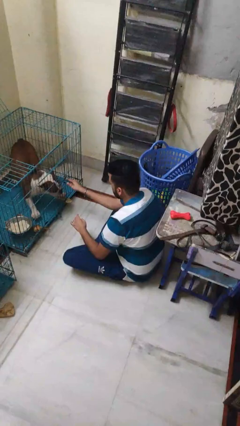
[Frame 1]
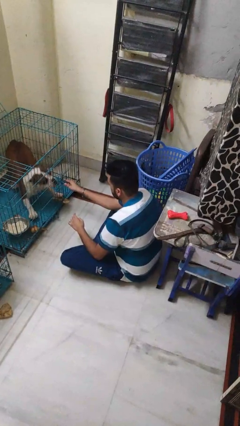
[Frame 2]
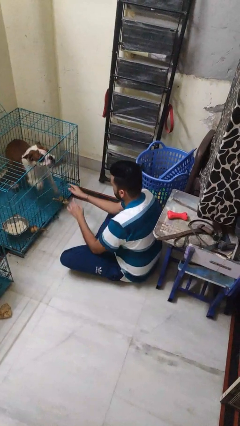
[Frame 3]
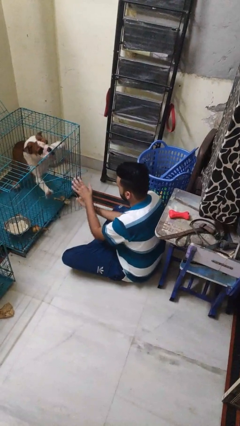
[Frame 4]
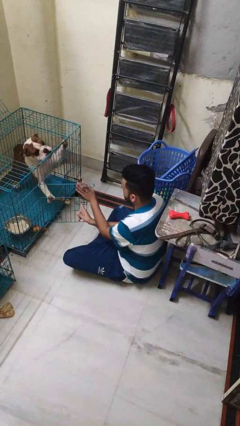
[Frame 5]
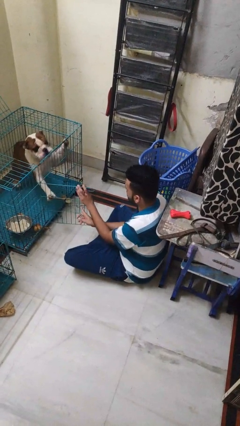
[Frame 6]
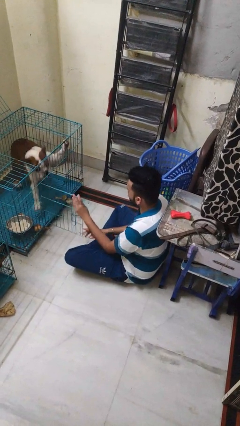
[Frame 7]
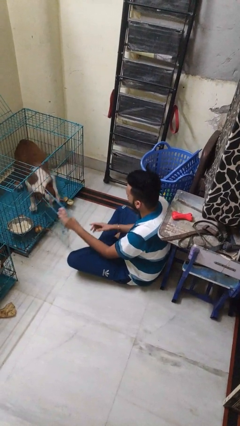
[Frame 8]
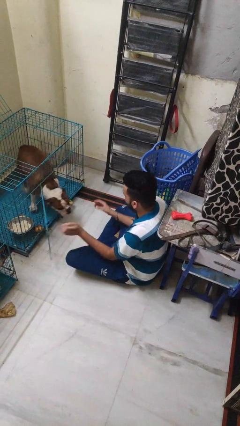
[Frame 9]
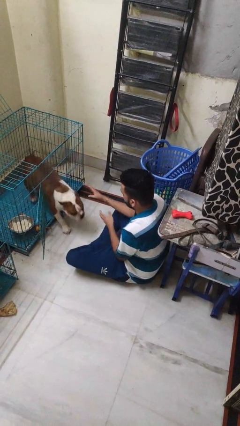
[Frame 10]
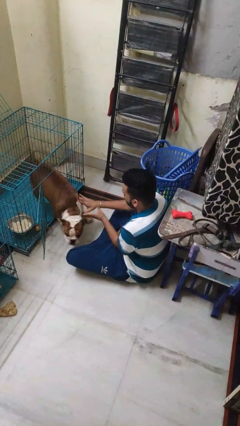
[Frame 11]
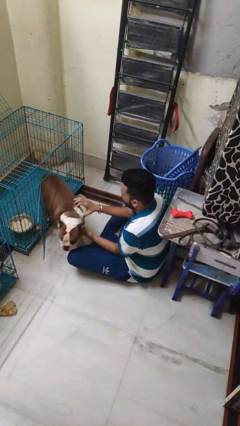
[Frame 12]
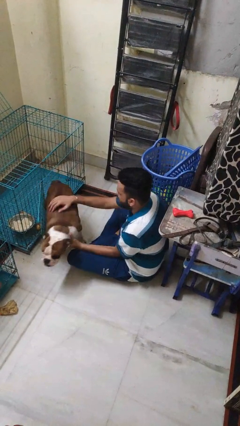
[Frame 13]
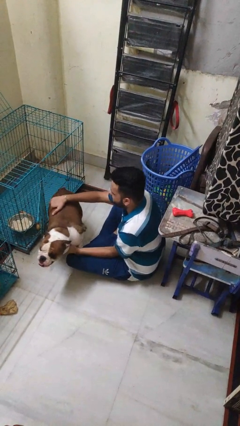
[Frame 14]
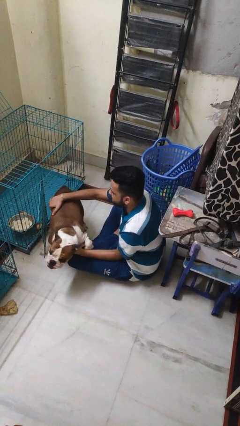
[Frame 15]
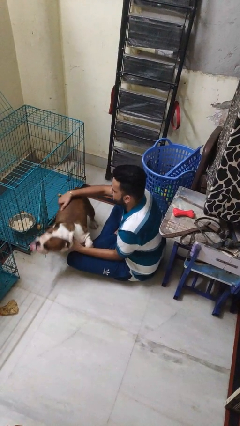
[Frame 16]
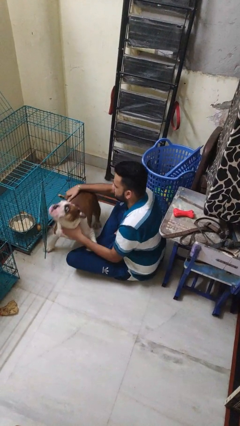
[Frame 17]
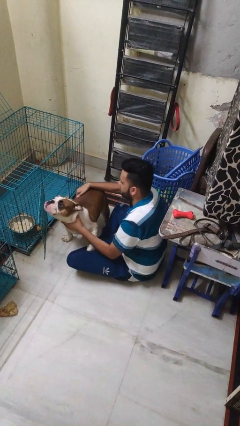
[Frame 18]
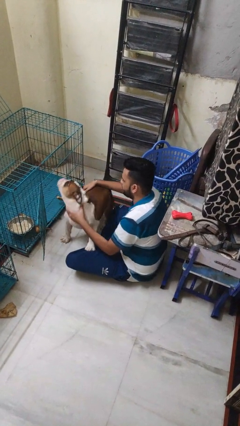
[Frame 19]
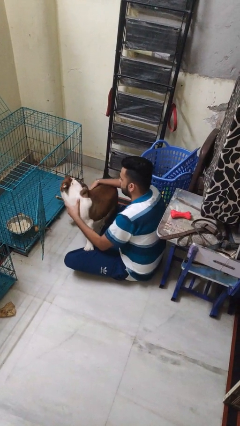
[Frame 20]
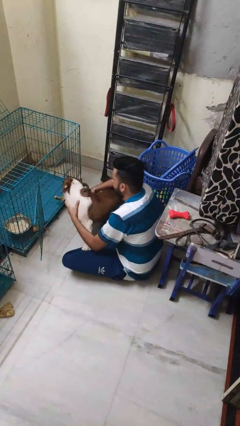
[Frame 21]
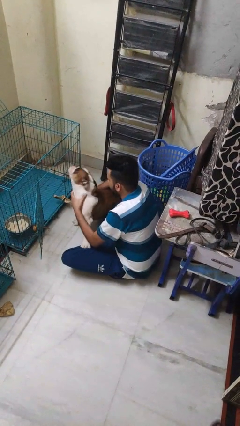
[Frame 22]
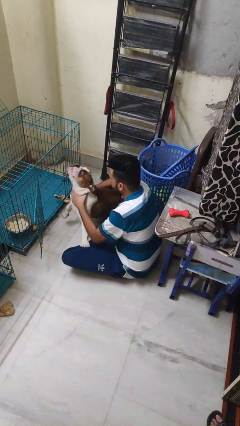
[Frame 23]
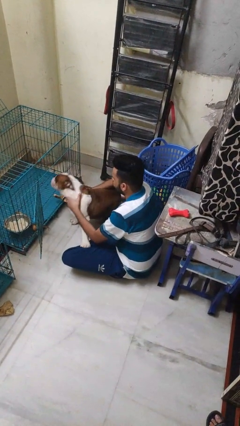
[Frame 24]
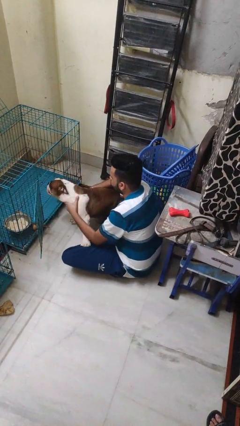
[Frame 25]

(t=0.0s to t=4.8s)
person uncrates dog

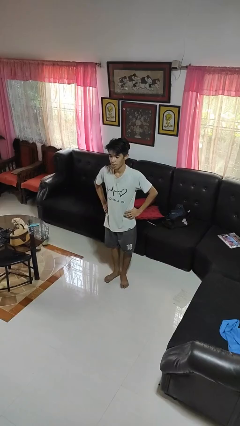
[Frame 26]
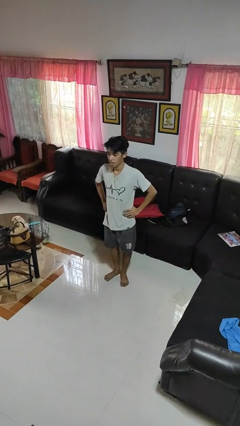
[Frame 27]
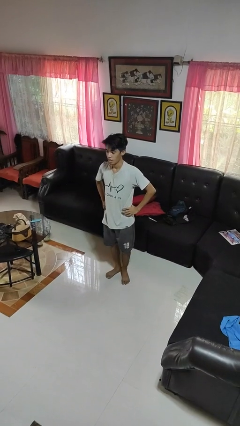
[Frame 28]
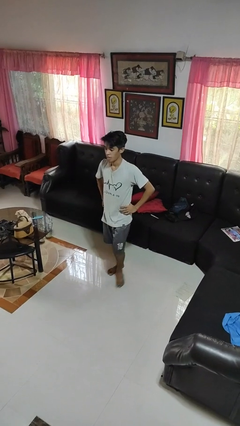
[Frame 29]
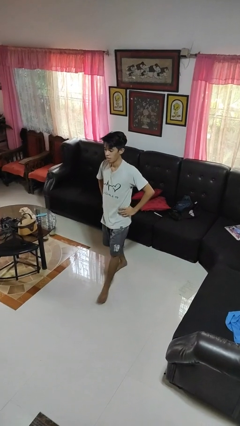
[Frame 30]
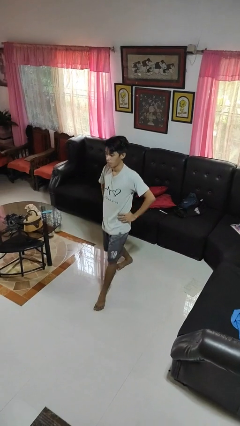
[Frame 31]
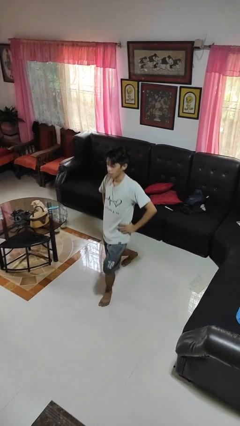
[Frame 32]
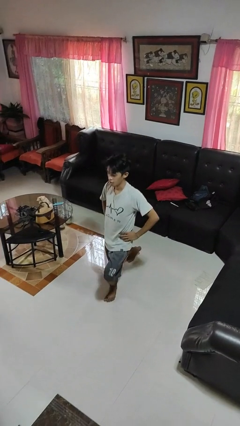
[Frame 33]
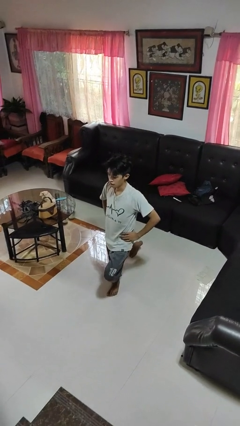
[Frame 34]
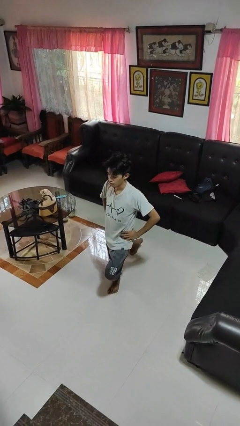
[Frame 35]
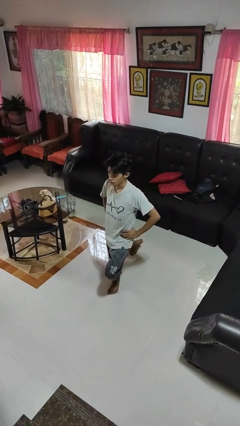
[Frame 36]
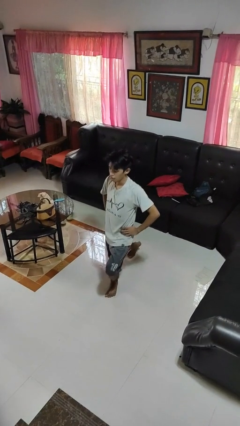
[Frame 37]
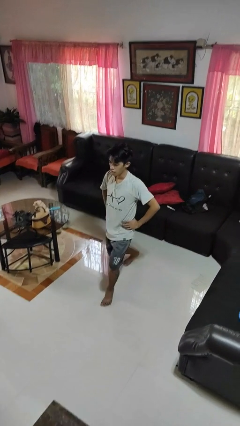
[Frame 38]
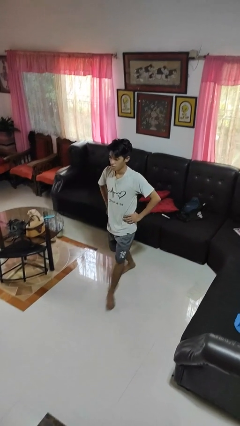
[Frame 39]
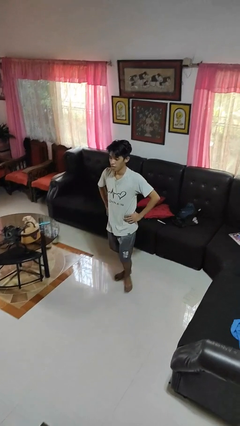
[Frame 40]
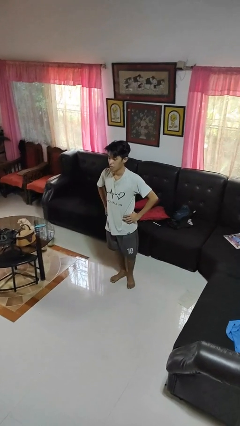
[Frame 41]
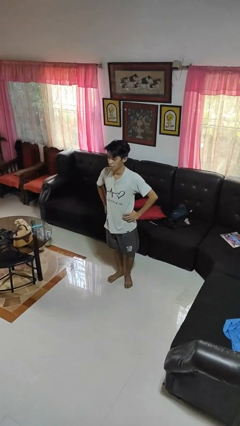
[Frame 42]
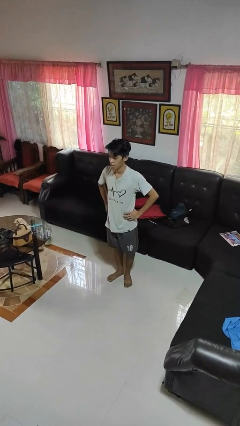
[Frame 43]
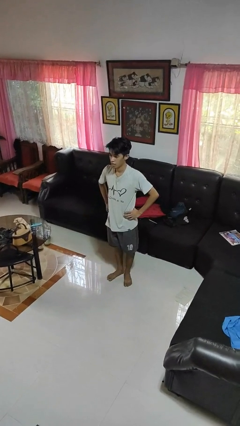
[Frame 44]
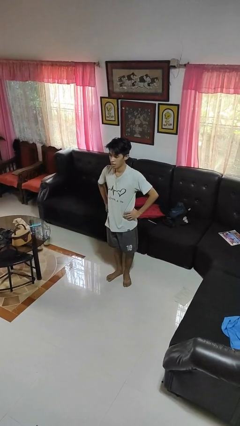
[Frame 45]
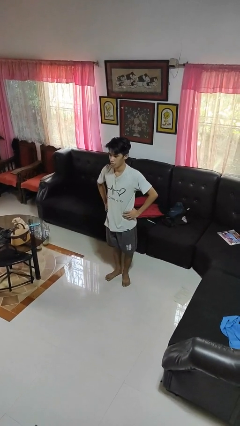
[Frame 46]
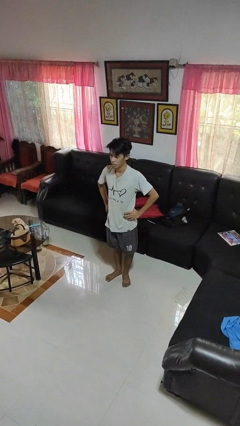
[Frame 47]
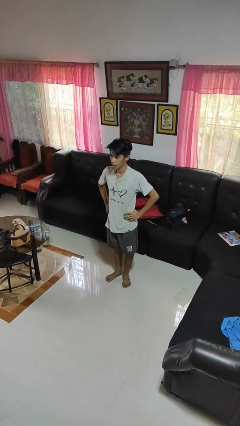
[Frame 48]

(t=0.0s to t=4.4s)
person exercises with lunges

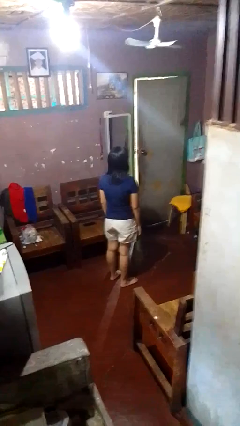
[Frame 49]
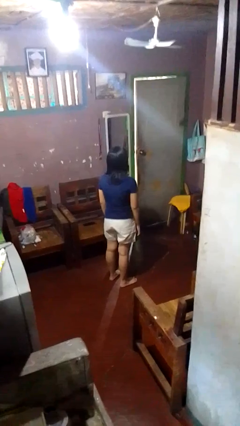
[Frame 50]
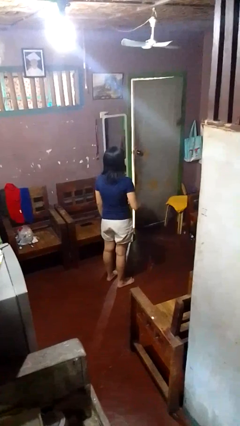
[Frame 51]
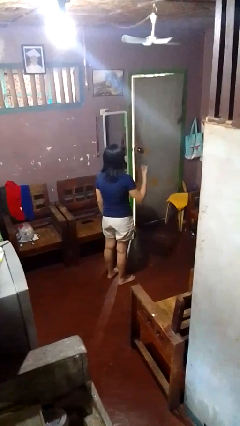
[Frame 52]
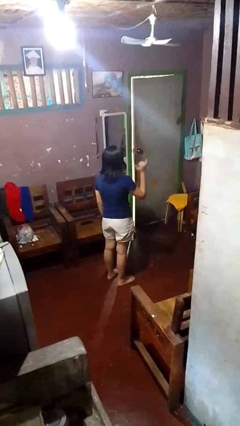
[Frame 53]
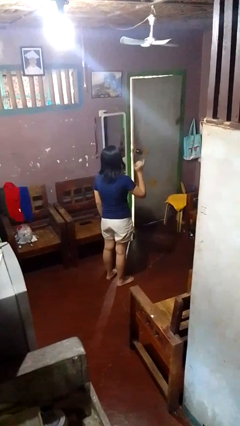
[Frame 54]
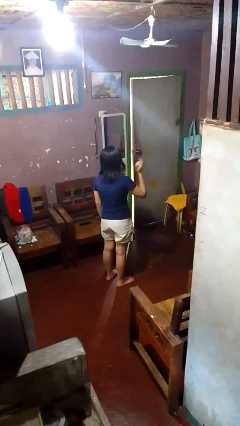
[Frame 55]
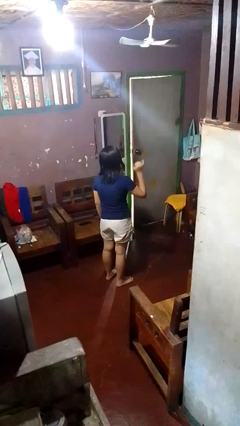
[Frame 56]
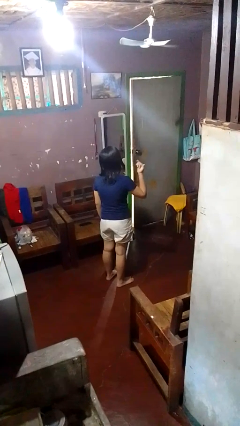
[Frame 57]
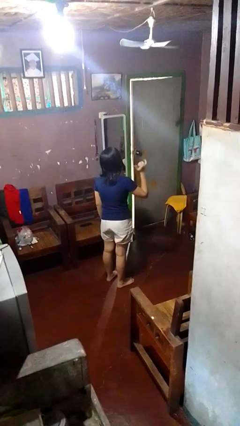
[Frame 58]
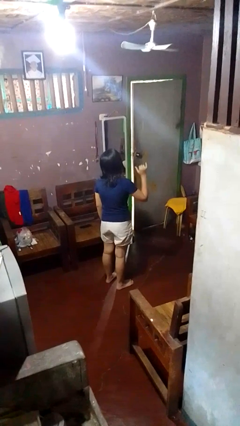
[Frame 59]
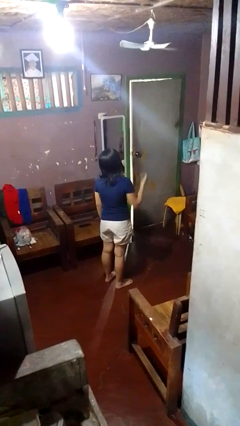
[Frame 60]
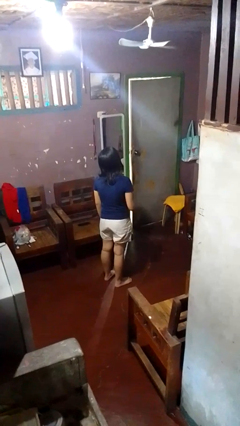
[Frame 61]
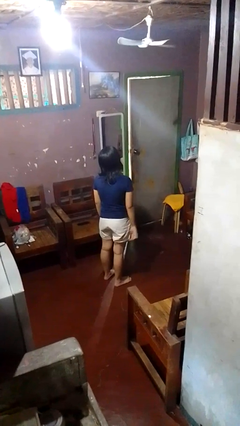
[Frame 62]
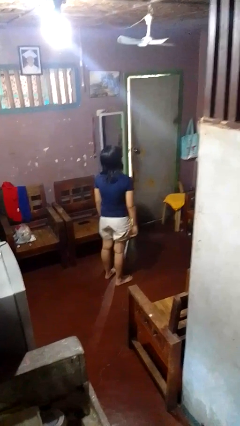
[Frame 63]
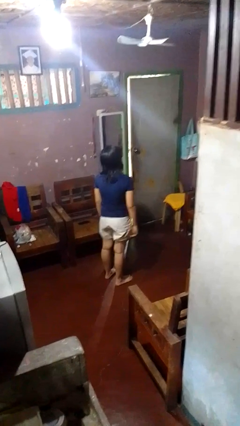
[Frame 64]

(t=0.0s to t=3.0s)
person gestures hang loose

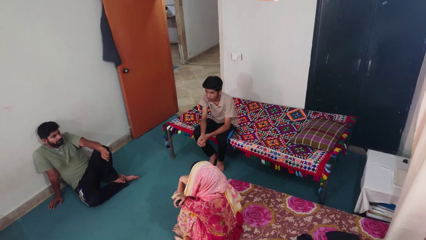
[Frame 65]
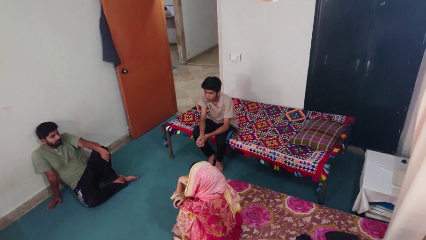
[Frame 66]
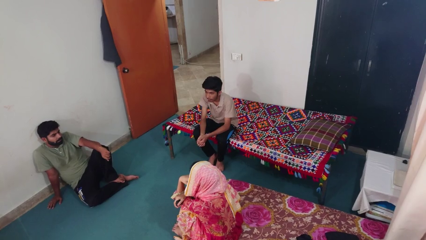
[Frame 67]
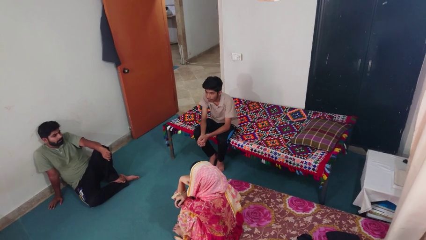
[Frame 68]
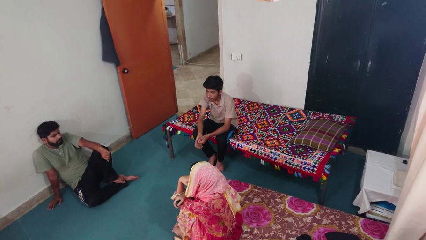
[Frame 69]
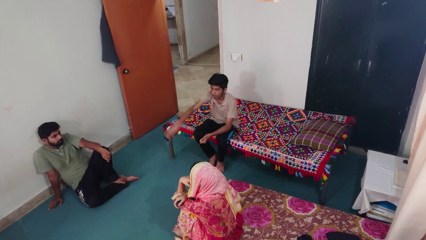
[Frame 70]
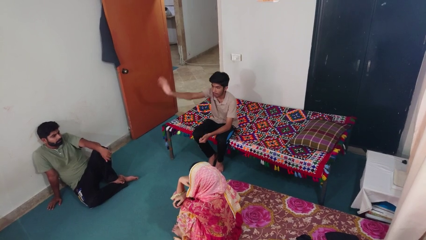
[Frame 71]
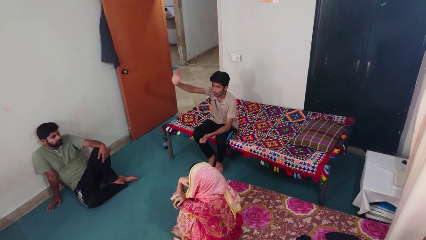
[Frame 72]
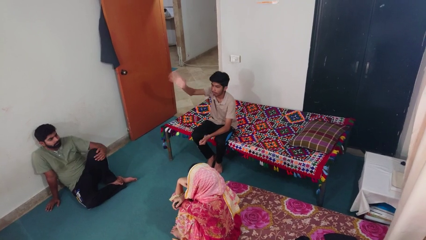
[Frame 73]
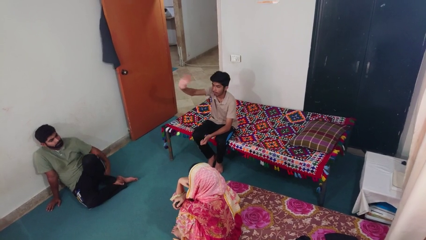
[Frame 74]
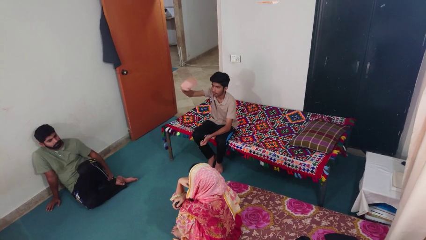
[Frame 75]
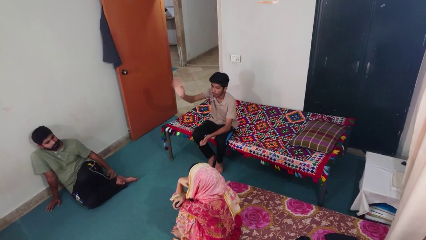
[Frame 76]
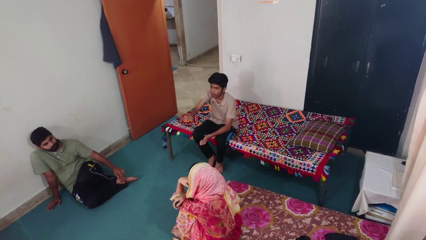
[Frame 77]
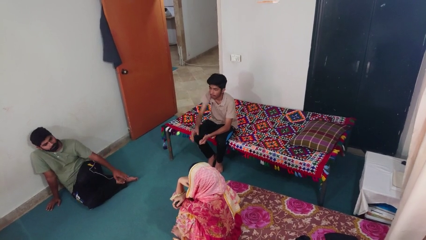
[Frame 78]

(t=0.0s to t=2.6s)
person waves at person

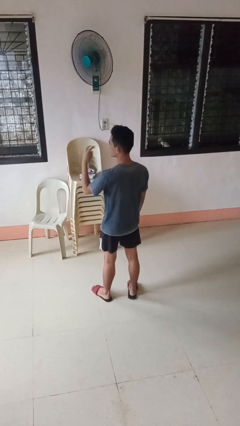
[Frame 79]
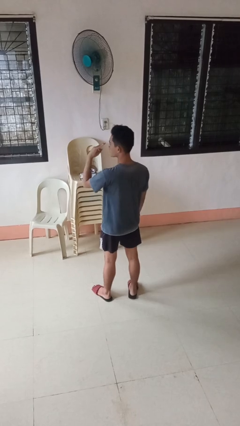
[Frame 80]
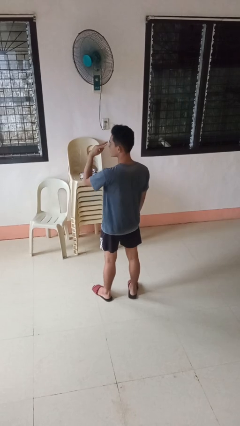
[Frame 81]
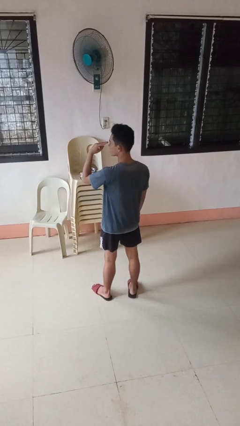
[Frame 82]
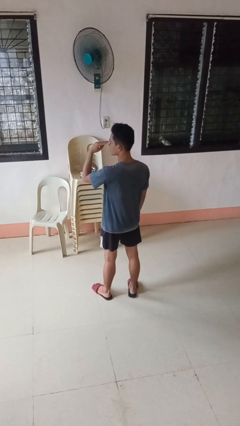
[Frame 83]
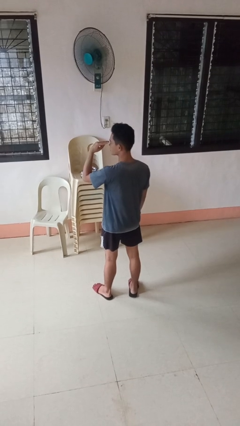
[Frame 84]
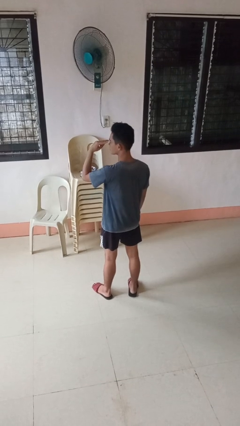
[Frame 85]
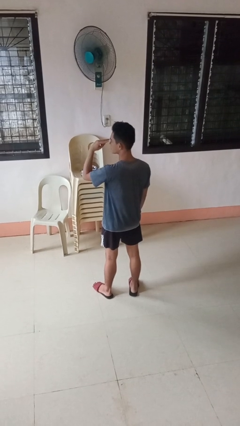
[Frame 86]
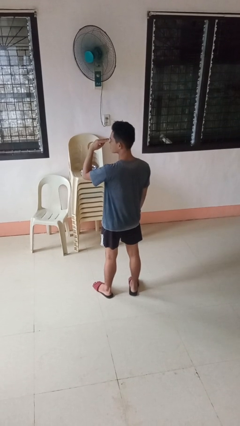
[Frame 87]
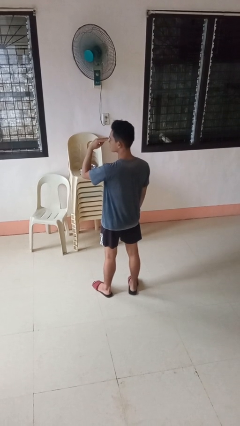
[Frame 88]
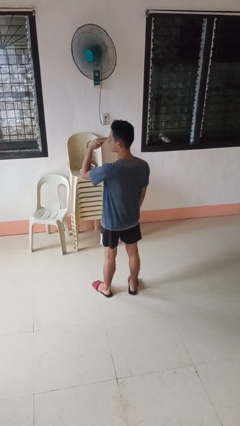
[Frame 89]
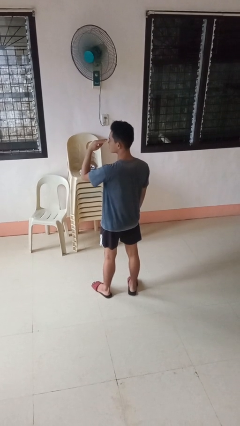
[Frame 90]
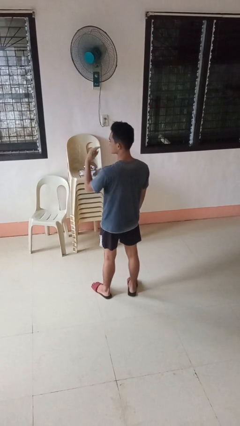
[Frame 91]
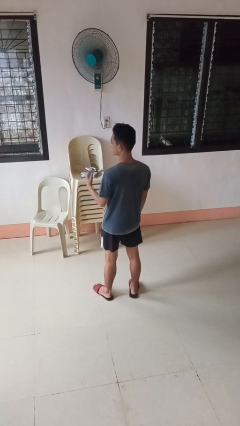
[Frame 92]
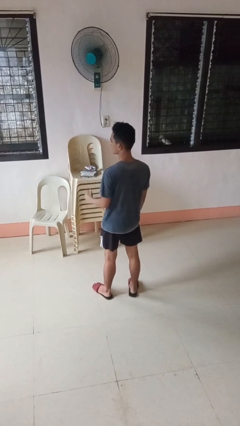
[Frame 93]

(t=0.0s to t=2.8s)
person gestures watch closely
